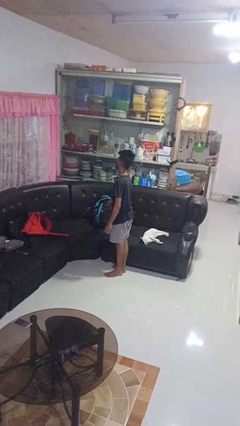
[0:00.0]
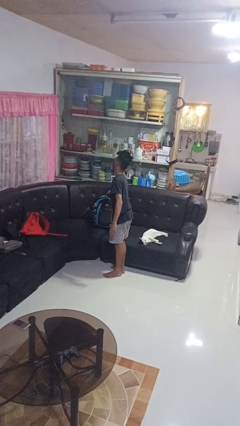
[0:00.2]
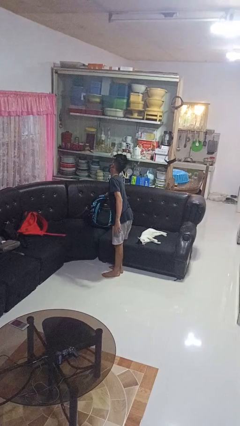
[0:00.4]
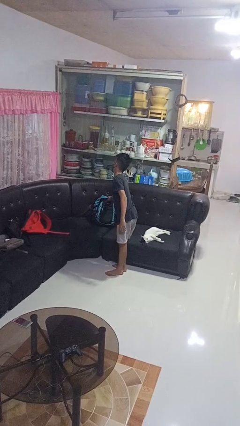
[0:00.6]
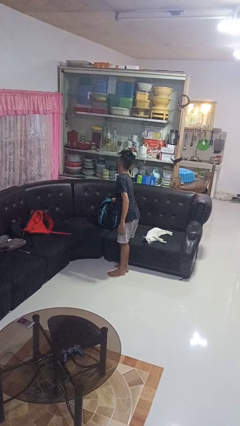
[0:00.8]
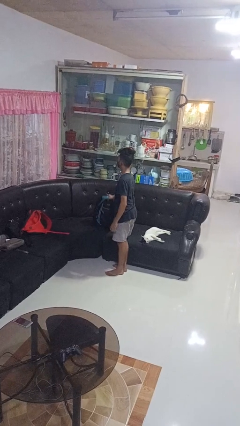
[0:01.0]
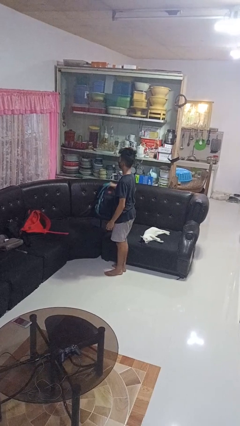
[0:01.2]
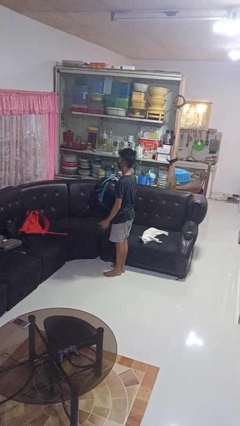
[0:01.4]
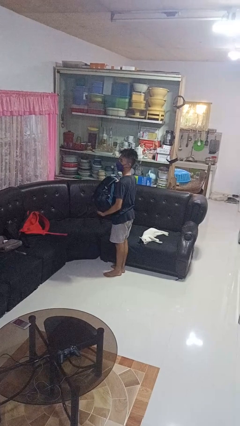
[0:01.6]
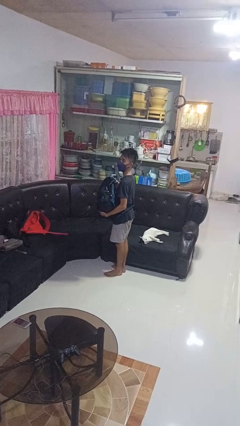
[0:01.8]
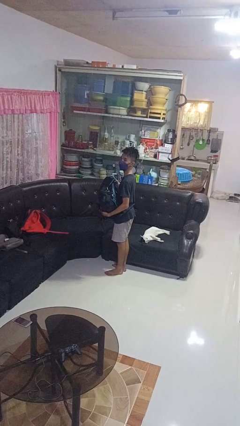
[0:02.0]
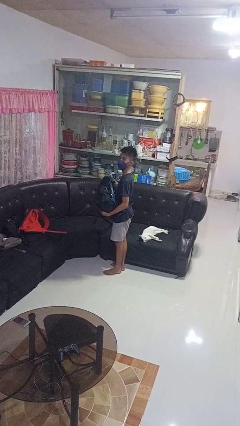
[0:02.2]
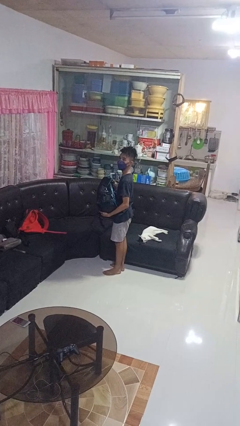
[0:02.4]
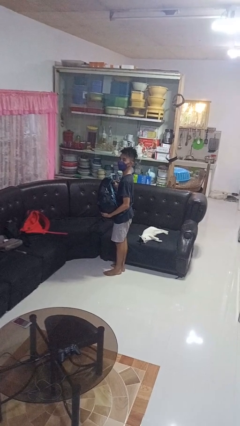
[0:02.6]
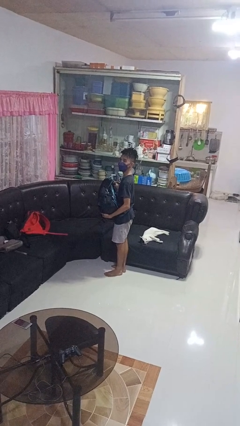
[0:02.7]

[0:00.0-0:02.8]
person picks up object from couch

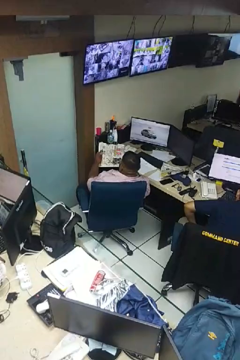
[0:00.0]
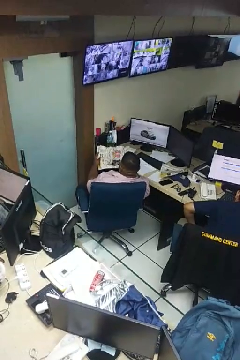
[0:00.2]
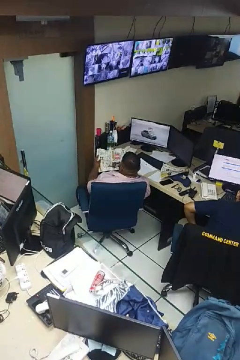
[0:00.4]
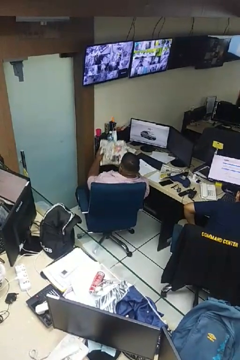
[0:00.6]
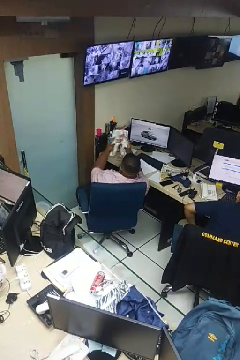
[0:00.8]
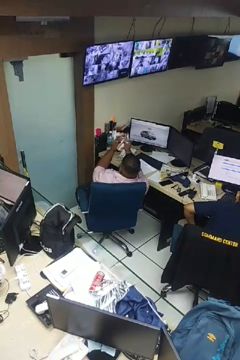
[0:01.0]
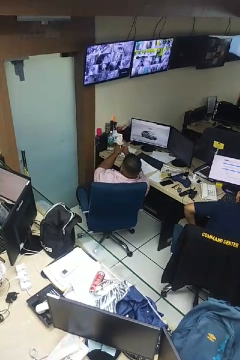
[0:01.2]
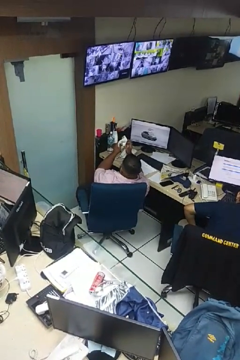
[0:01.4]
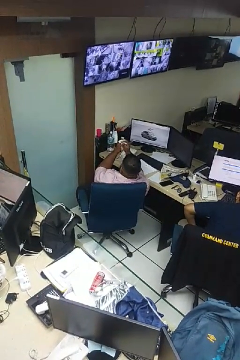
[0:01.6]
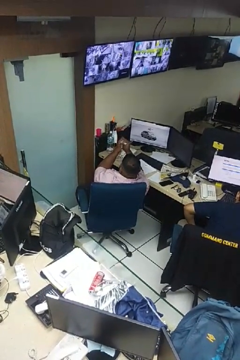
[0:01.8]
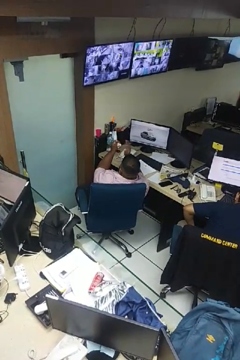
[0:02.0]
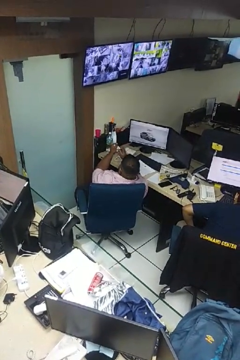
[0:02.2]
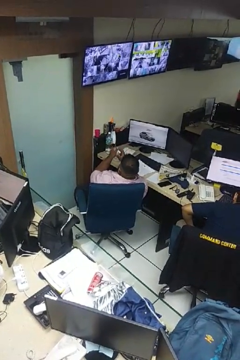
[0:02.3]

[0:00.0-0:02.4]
person crumples paper

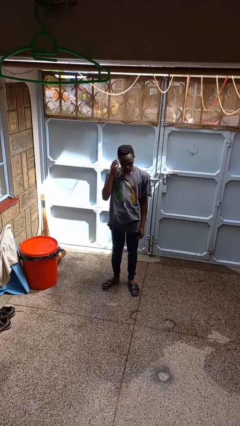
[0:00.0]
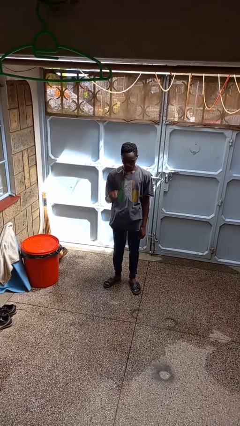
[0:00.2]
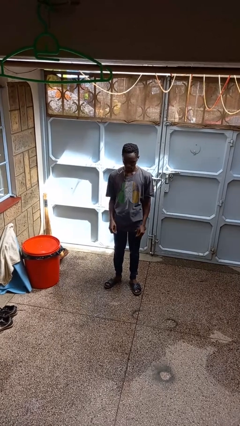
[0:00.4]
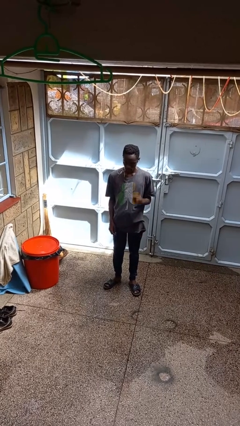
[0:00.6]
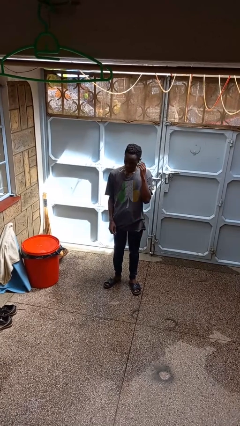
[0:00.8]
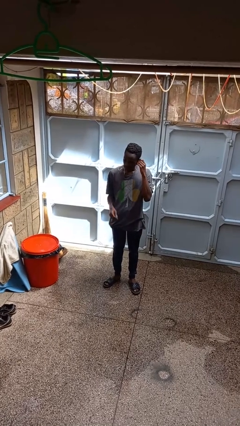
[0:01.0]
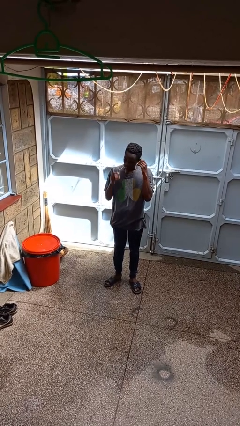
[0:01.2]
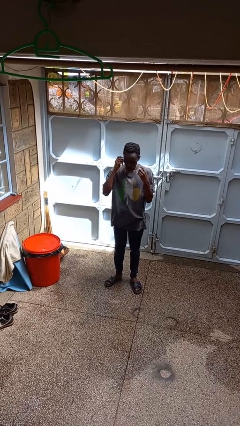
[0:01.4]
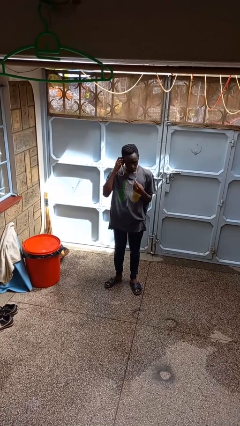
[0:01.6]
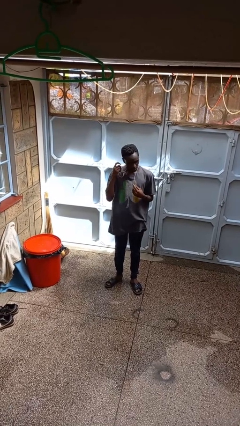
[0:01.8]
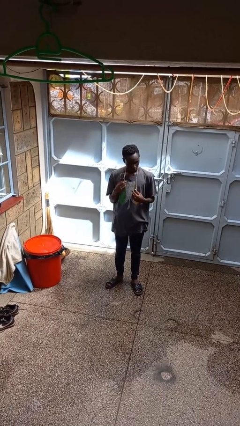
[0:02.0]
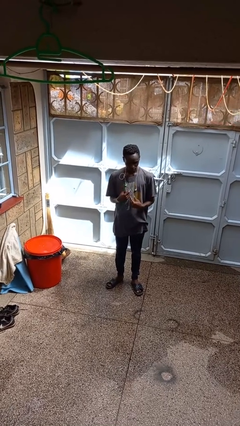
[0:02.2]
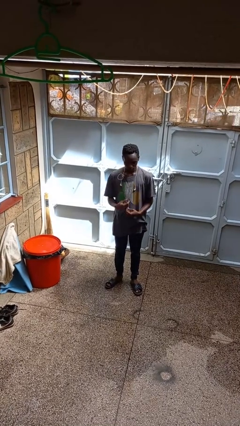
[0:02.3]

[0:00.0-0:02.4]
person takes off headphones

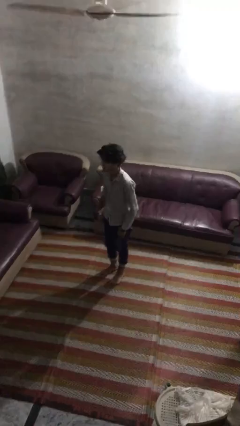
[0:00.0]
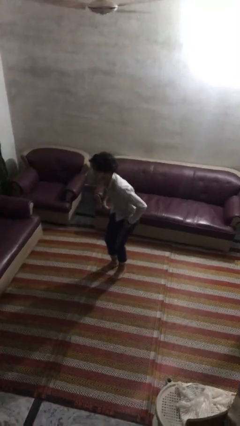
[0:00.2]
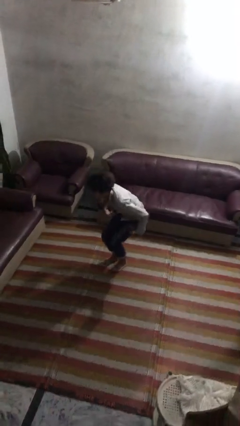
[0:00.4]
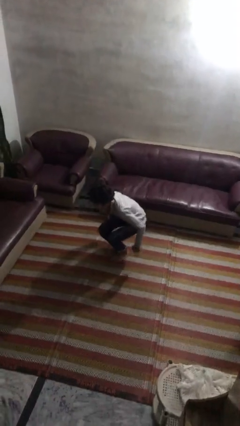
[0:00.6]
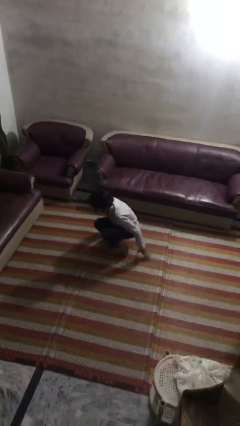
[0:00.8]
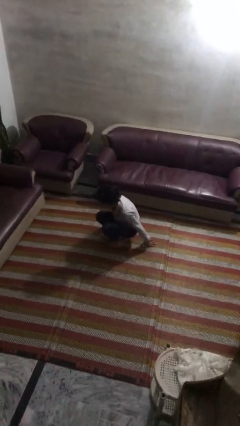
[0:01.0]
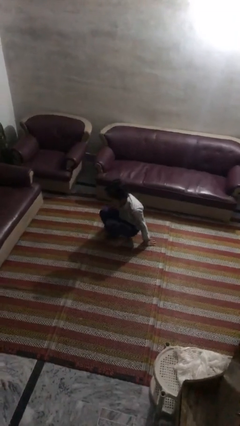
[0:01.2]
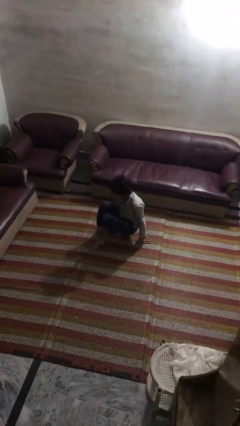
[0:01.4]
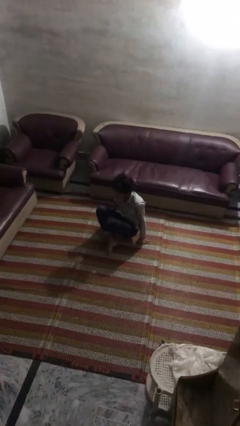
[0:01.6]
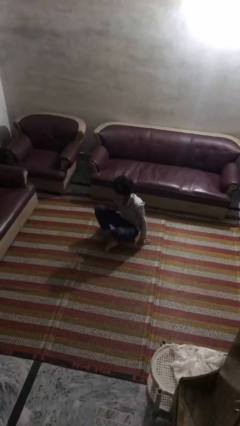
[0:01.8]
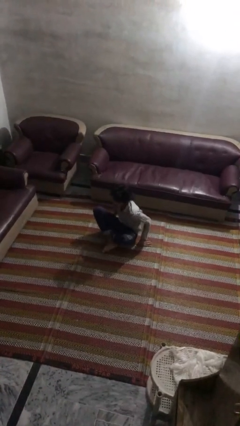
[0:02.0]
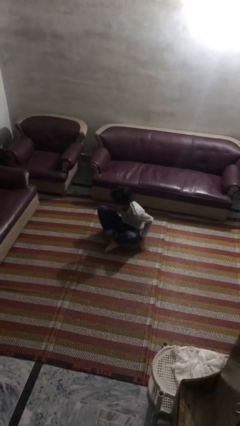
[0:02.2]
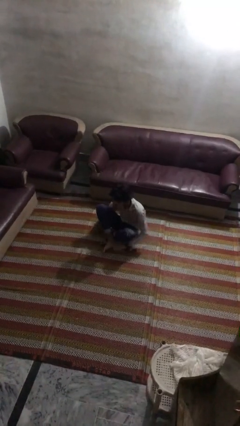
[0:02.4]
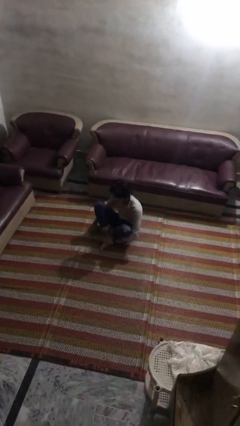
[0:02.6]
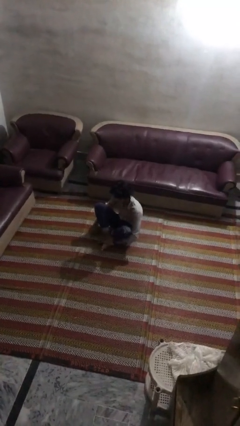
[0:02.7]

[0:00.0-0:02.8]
person sits crisscross

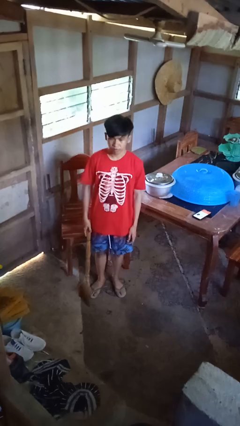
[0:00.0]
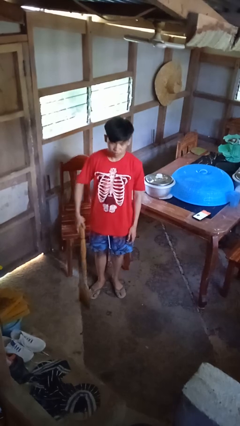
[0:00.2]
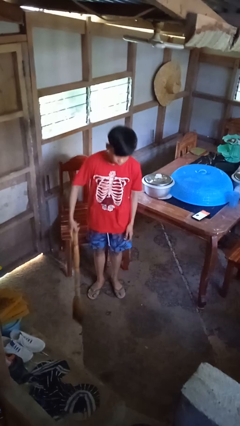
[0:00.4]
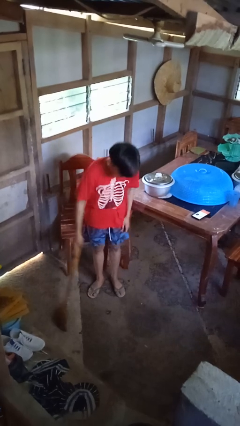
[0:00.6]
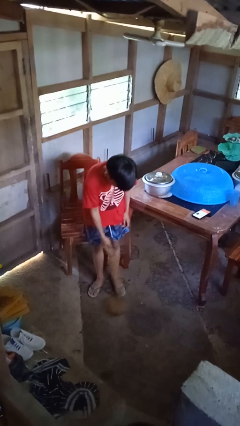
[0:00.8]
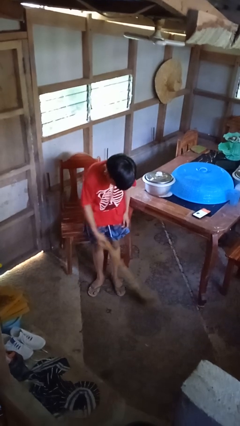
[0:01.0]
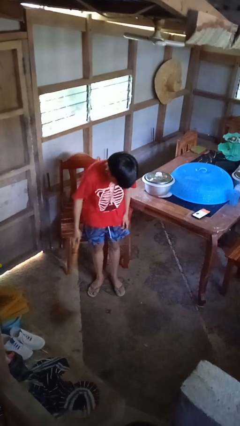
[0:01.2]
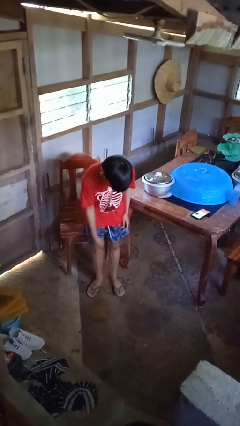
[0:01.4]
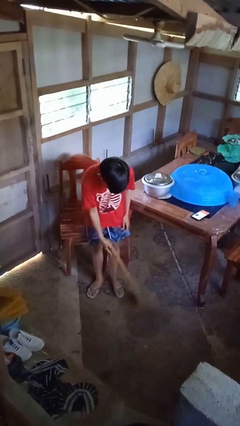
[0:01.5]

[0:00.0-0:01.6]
person sweeps floor

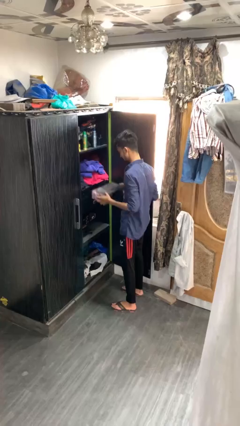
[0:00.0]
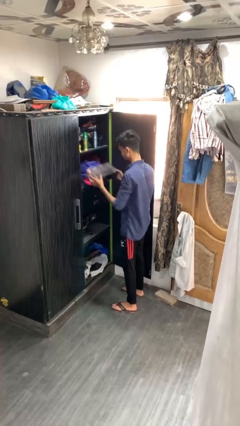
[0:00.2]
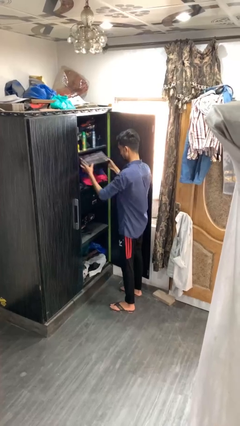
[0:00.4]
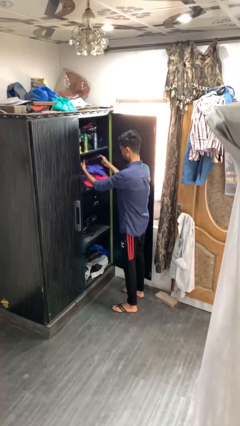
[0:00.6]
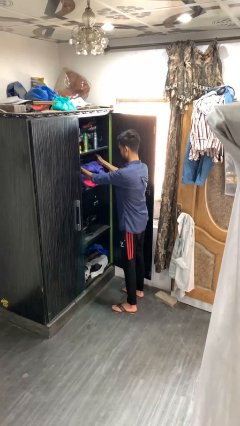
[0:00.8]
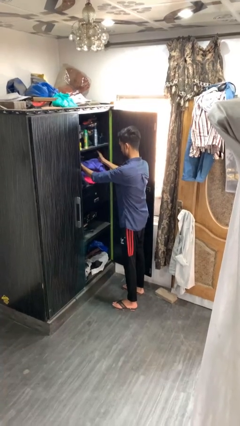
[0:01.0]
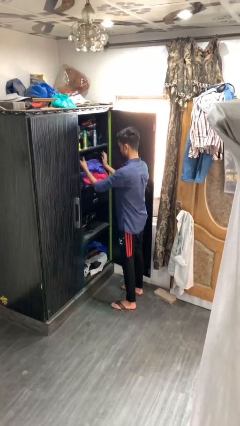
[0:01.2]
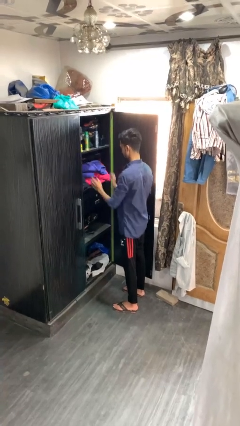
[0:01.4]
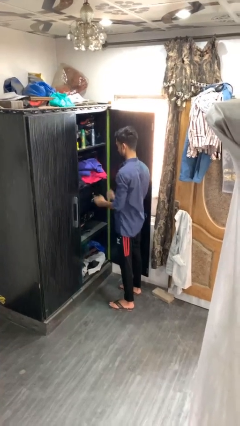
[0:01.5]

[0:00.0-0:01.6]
person puts down object into cabinet

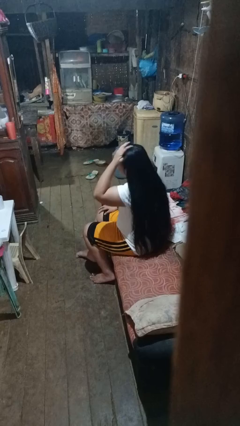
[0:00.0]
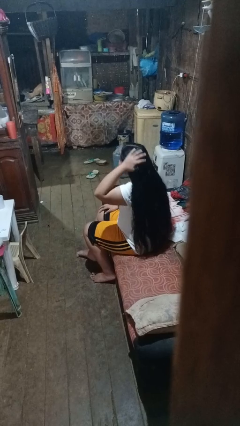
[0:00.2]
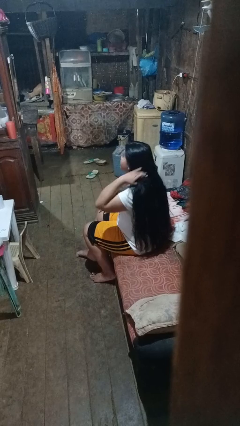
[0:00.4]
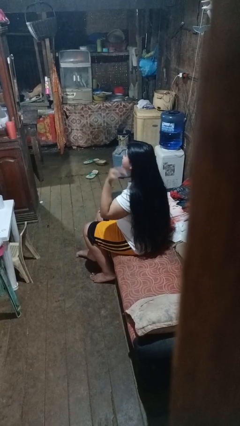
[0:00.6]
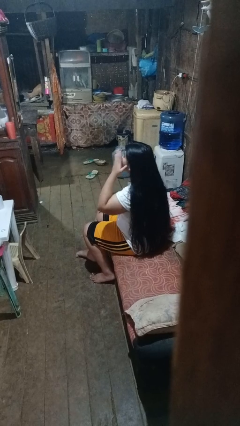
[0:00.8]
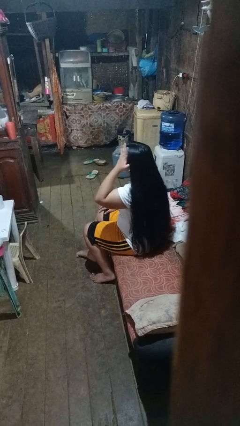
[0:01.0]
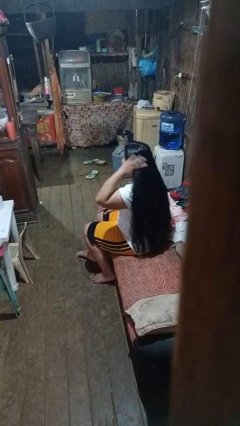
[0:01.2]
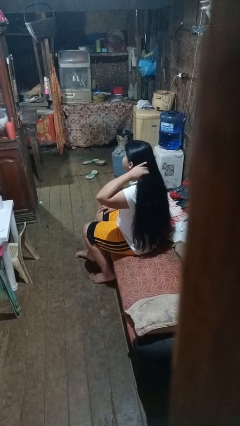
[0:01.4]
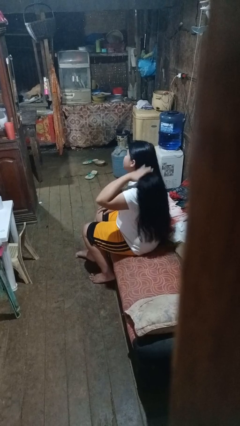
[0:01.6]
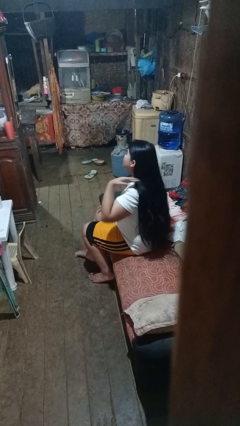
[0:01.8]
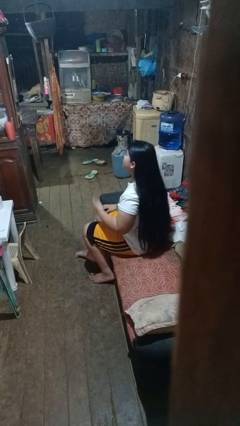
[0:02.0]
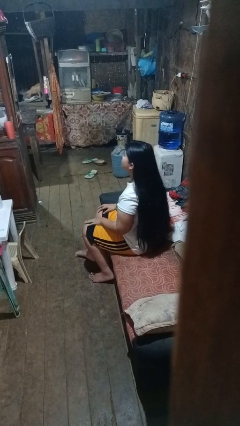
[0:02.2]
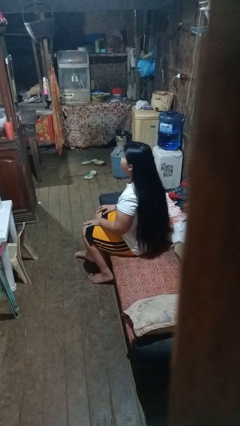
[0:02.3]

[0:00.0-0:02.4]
person strokes hair

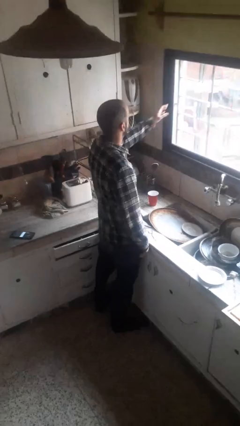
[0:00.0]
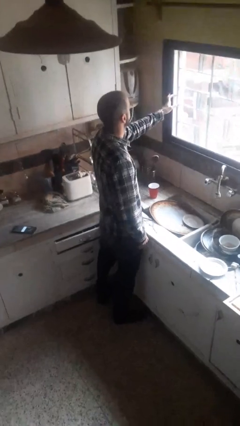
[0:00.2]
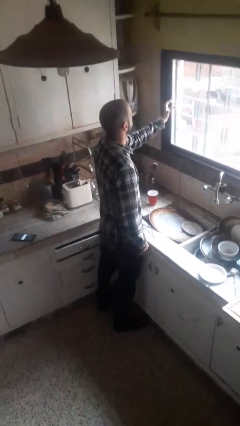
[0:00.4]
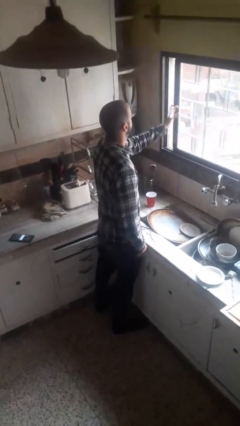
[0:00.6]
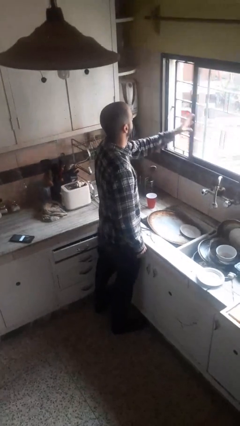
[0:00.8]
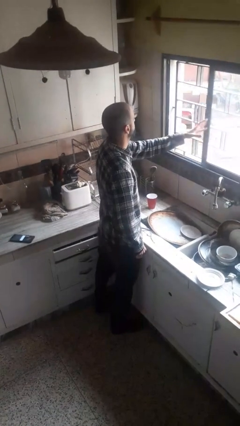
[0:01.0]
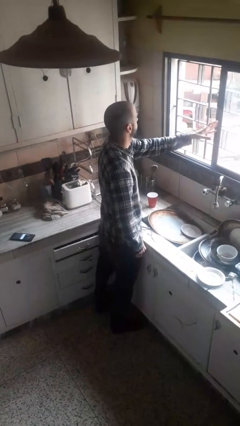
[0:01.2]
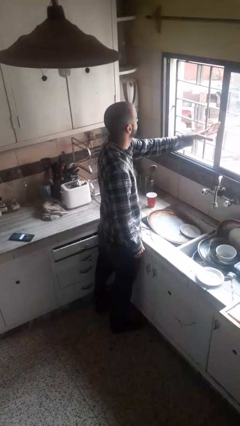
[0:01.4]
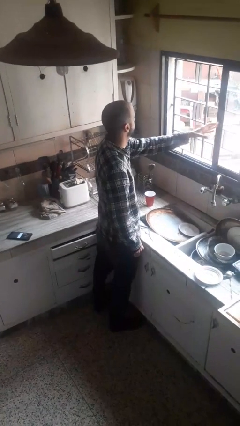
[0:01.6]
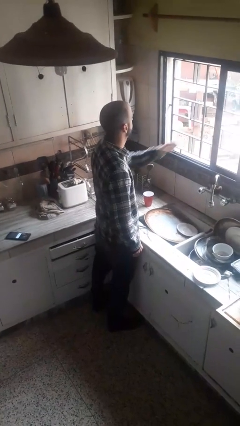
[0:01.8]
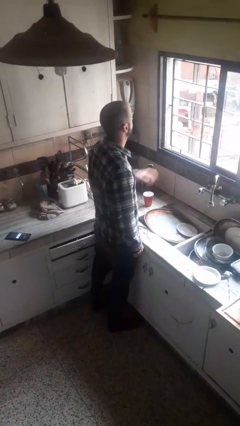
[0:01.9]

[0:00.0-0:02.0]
person opens home window
